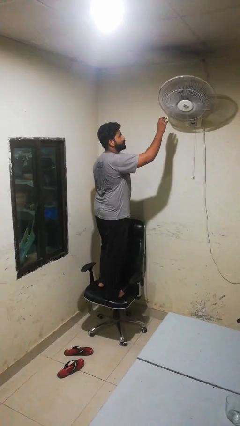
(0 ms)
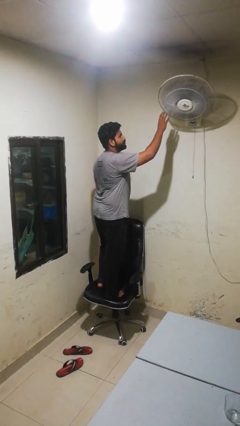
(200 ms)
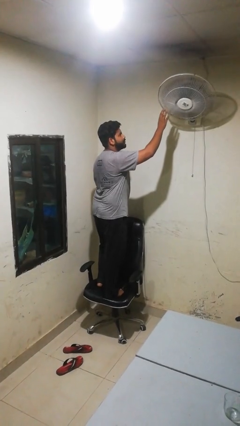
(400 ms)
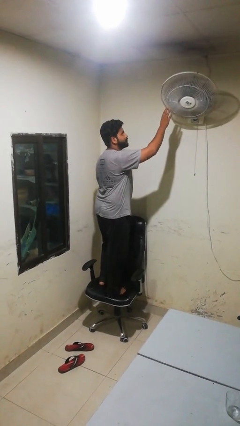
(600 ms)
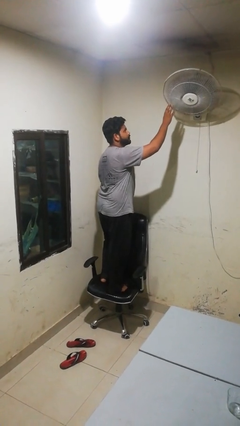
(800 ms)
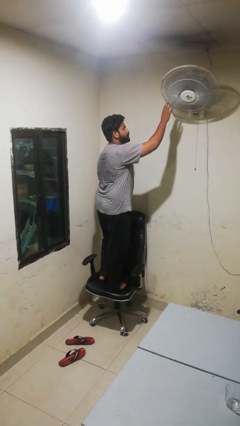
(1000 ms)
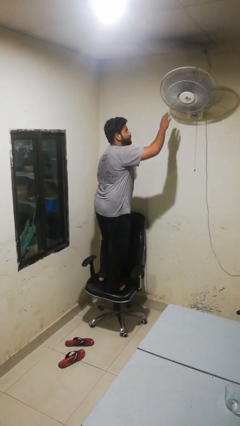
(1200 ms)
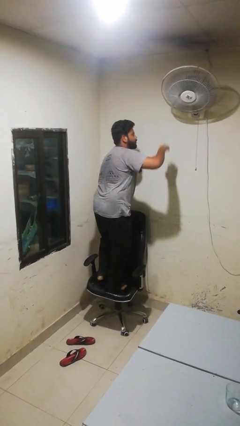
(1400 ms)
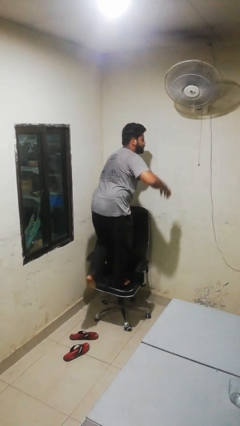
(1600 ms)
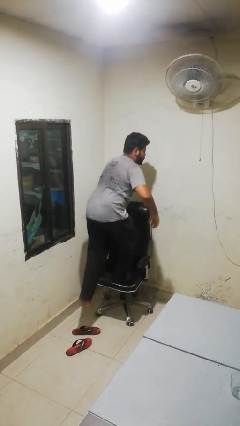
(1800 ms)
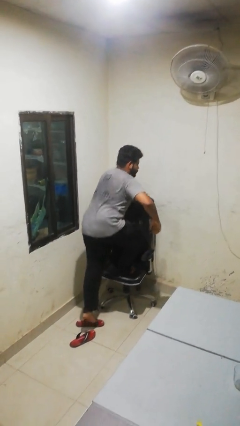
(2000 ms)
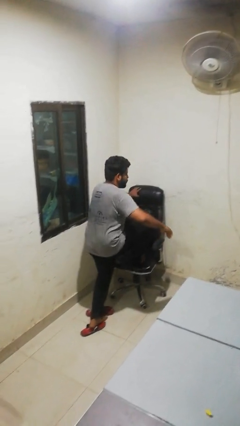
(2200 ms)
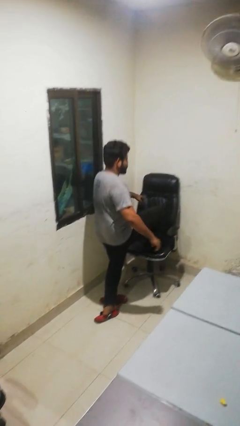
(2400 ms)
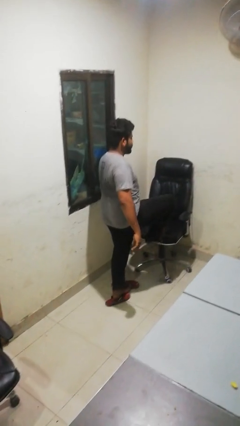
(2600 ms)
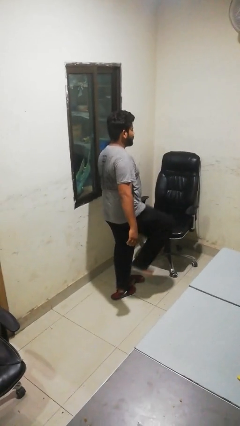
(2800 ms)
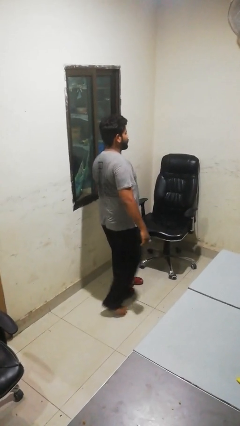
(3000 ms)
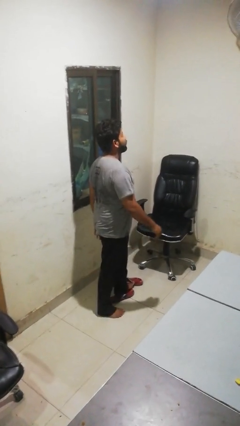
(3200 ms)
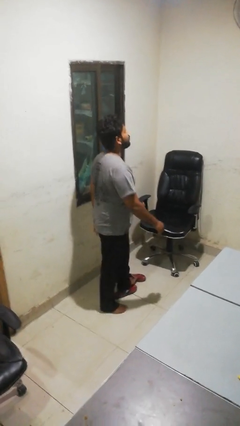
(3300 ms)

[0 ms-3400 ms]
person climbs off chair

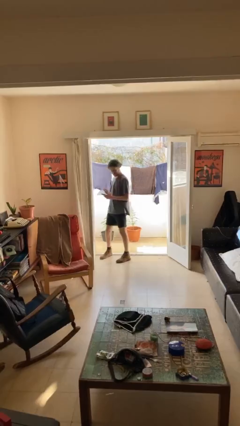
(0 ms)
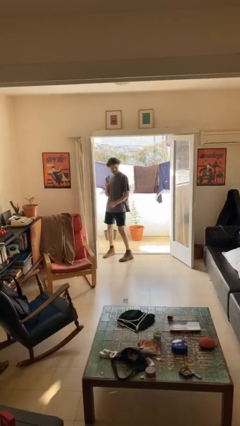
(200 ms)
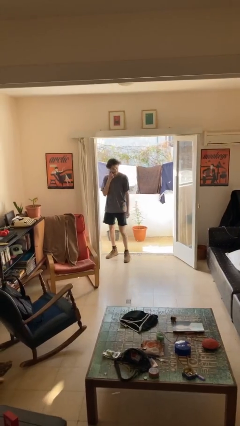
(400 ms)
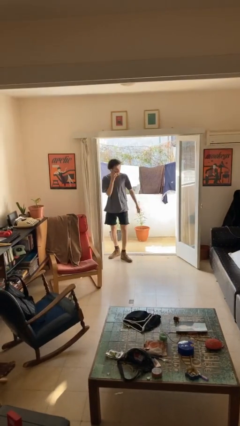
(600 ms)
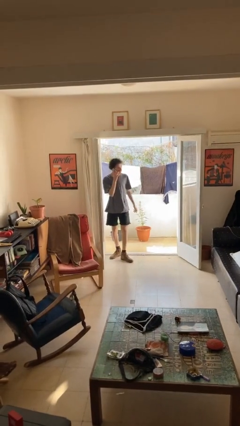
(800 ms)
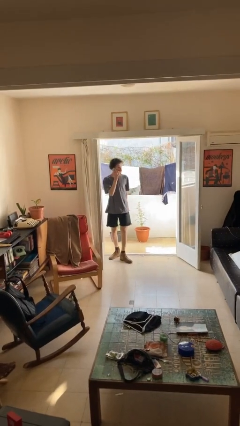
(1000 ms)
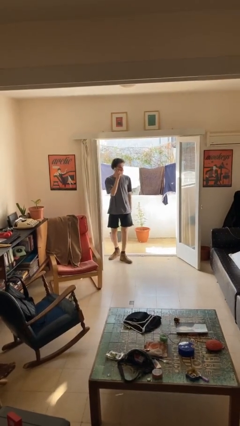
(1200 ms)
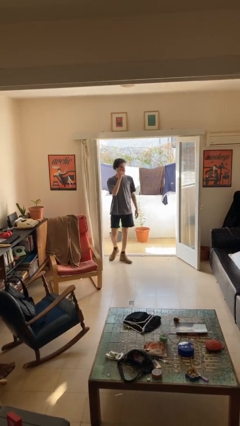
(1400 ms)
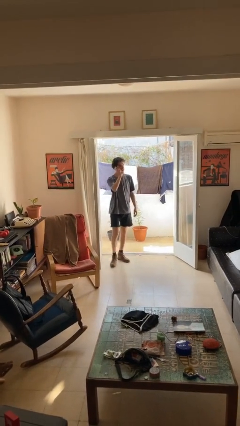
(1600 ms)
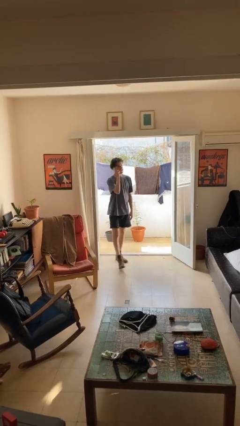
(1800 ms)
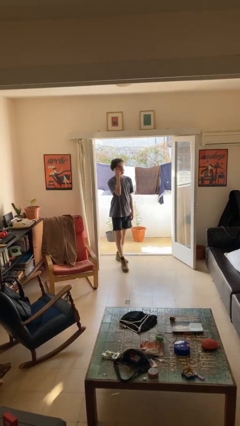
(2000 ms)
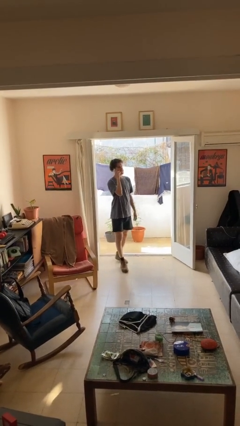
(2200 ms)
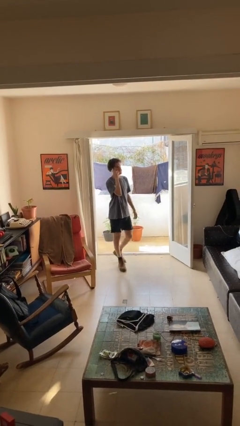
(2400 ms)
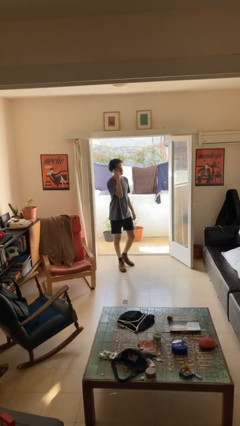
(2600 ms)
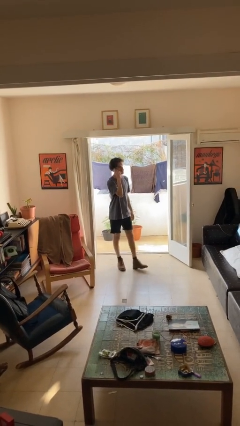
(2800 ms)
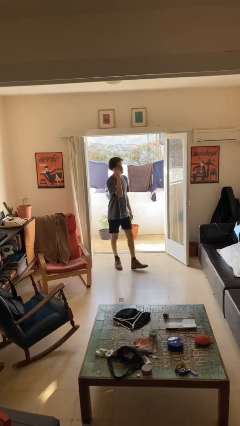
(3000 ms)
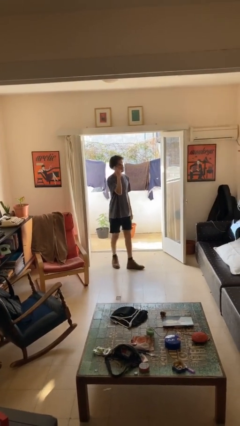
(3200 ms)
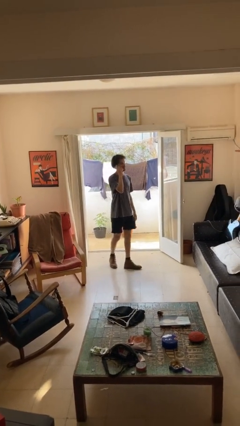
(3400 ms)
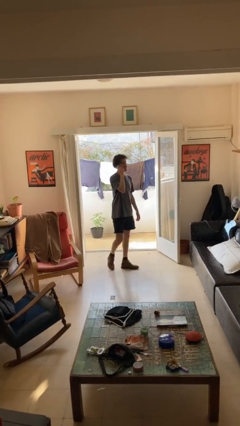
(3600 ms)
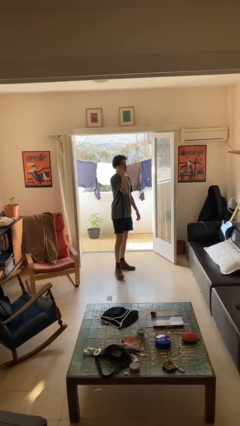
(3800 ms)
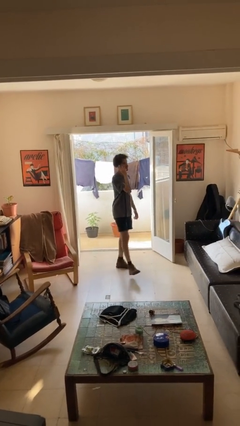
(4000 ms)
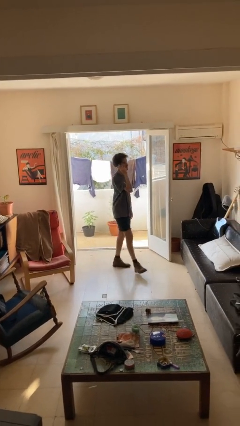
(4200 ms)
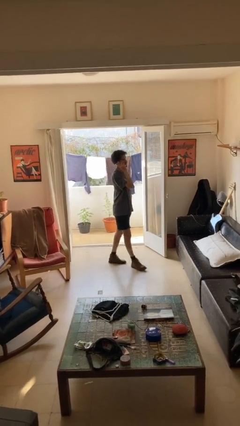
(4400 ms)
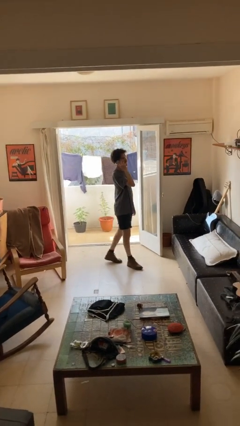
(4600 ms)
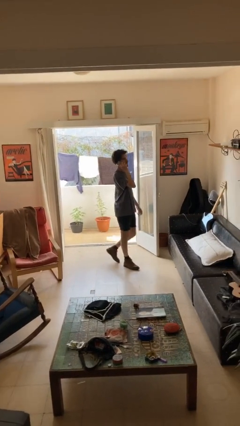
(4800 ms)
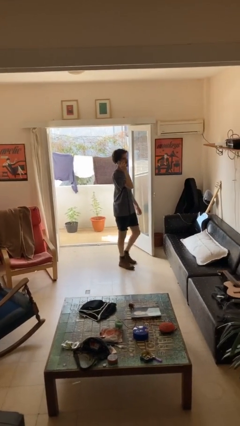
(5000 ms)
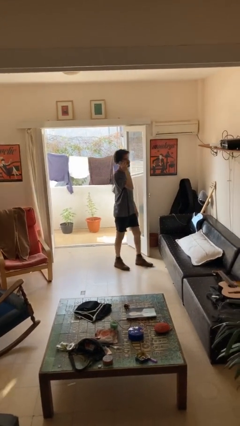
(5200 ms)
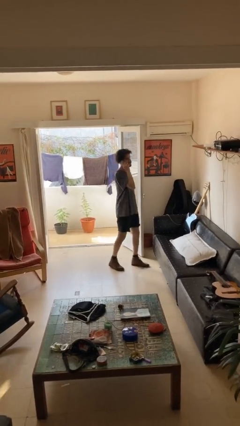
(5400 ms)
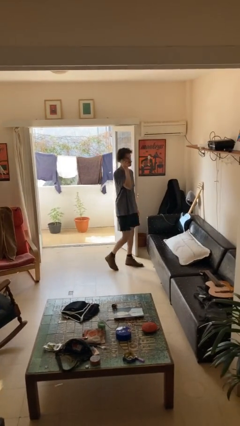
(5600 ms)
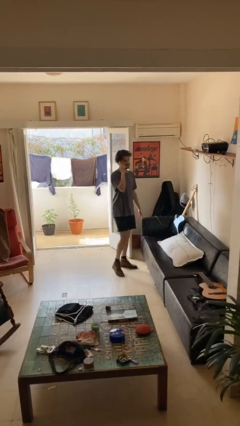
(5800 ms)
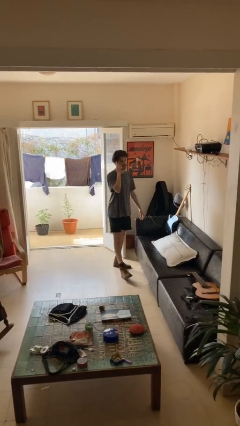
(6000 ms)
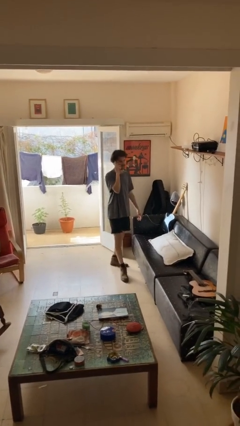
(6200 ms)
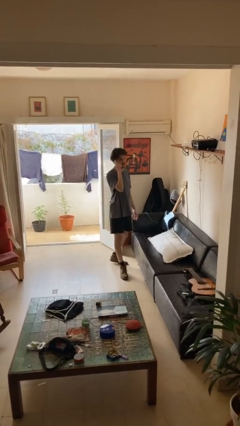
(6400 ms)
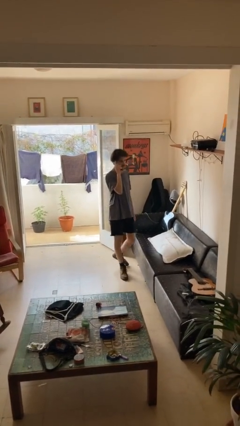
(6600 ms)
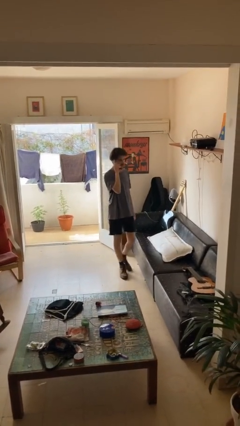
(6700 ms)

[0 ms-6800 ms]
person talks on phone

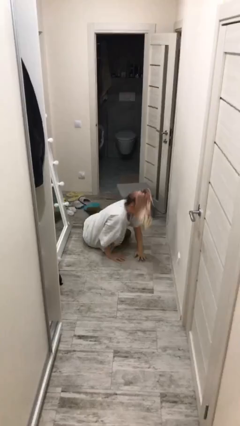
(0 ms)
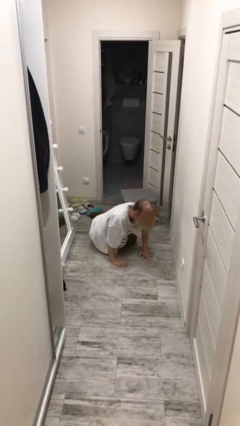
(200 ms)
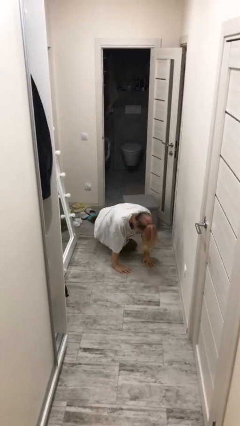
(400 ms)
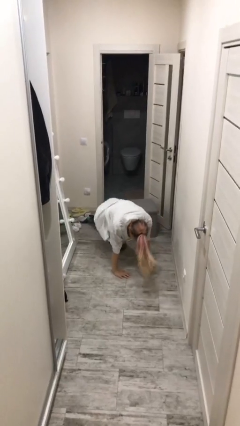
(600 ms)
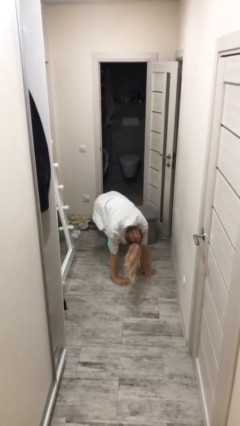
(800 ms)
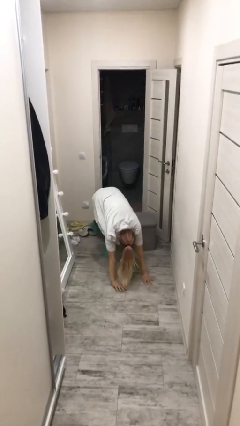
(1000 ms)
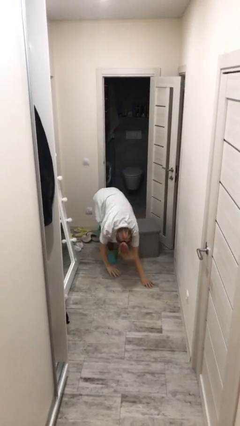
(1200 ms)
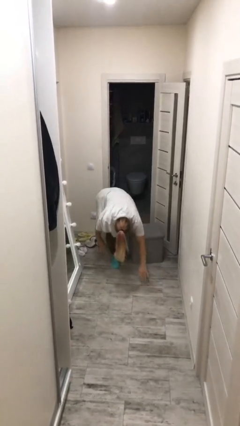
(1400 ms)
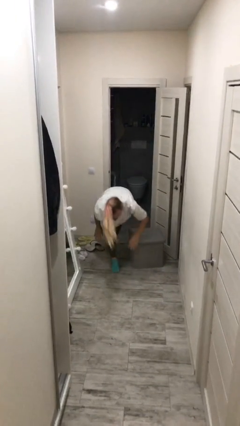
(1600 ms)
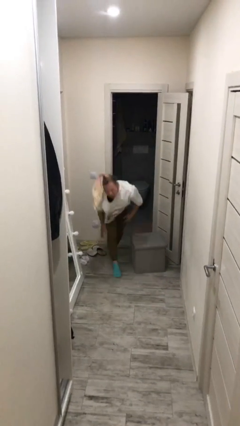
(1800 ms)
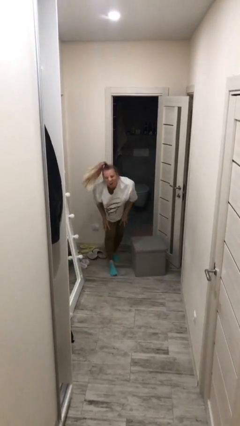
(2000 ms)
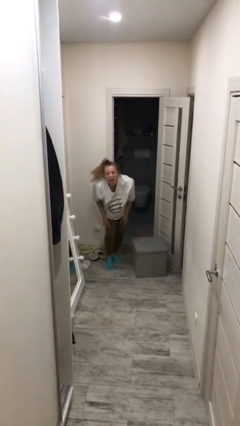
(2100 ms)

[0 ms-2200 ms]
person stands up from floor

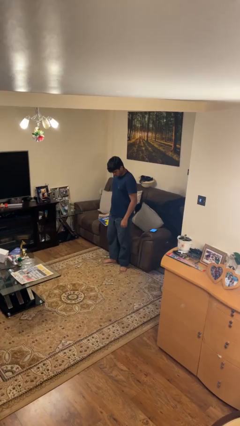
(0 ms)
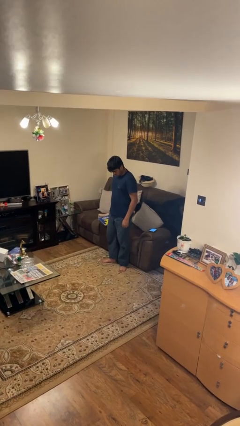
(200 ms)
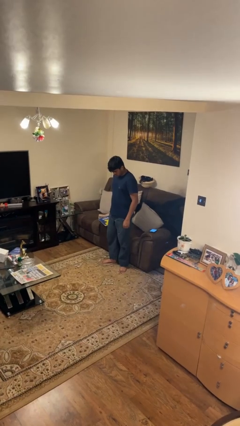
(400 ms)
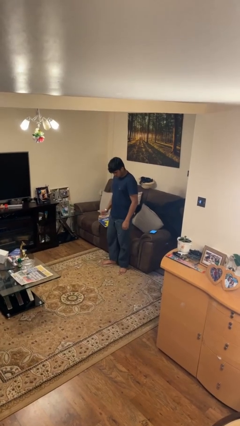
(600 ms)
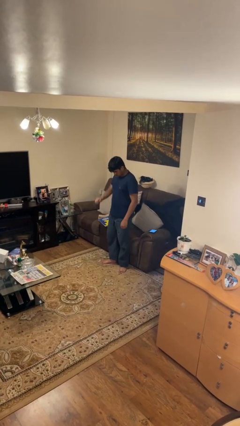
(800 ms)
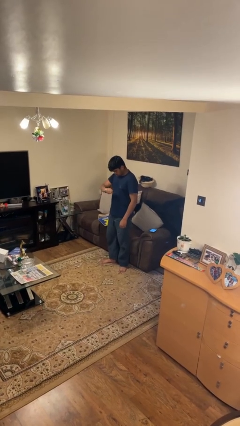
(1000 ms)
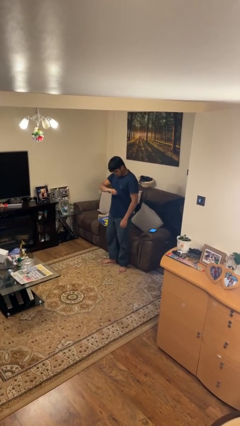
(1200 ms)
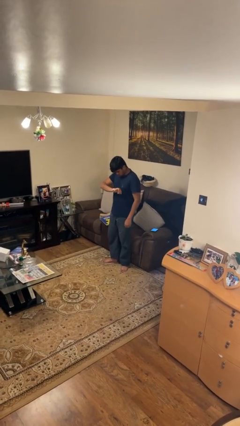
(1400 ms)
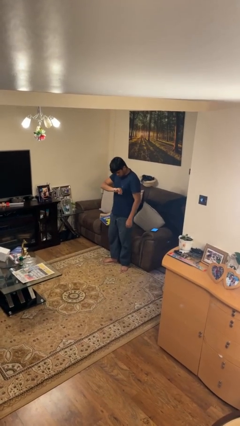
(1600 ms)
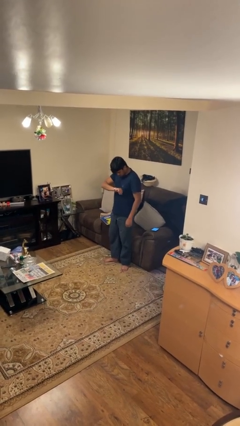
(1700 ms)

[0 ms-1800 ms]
person looks at wristwatch

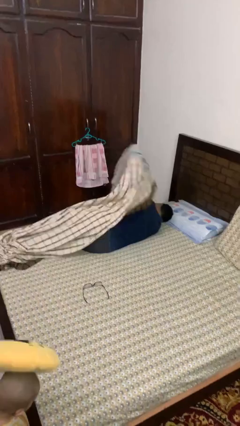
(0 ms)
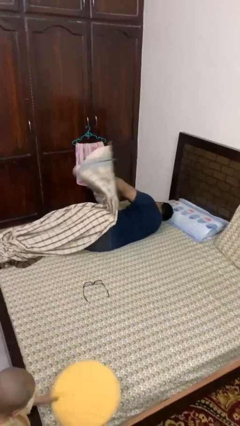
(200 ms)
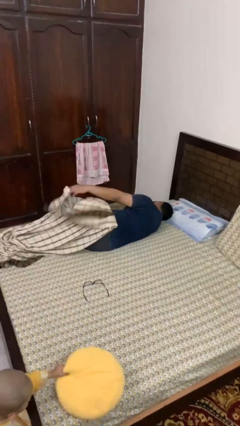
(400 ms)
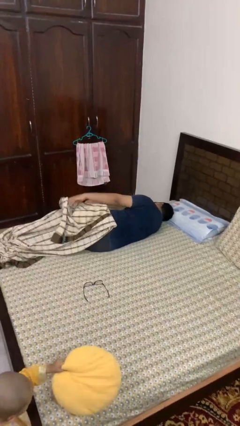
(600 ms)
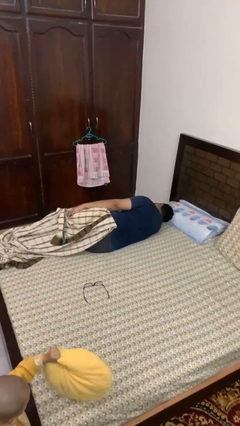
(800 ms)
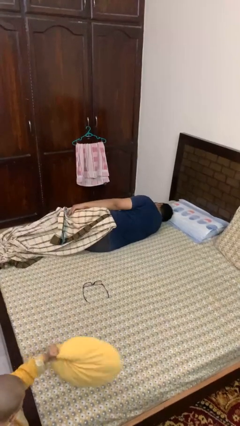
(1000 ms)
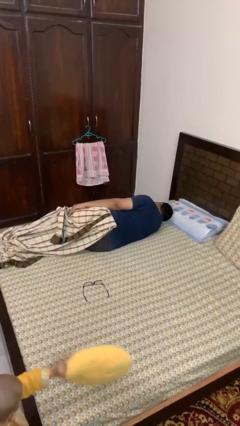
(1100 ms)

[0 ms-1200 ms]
person uncovers with blanket

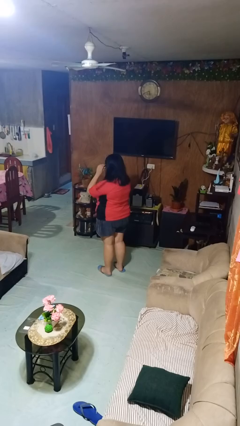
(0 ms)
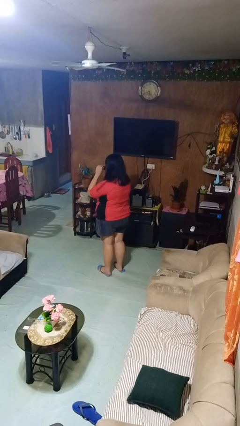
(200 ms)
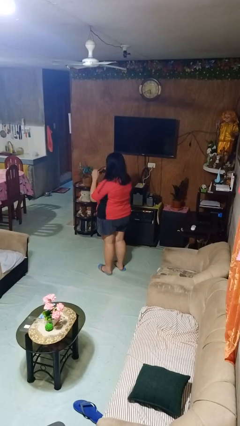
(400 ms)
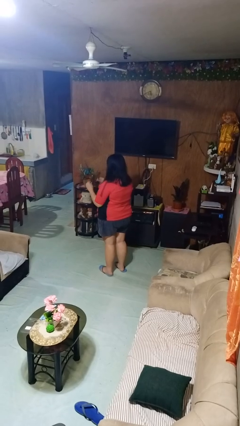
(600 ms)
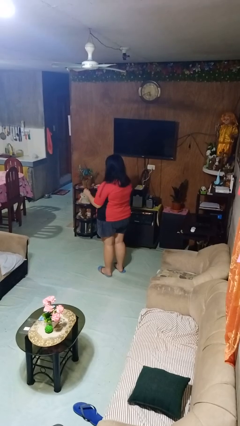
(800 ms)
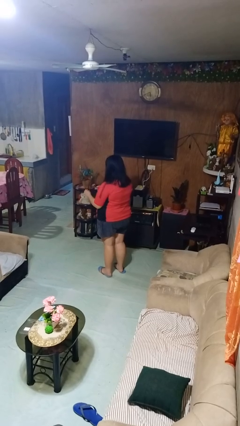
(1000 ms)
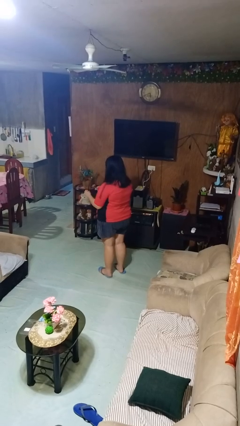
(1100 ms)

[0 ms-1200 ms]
person takes off sunglasses

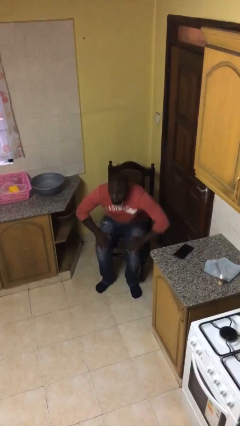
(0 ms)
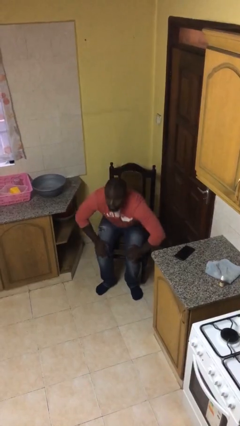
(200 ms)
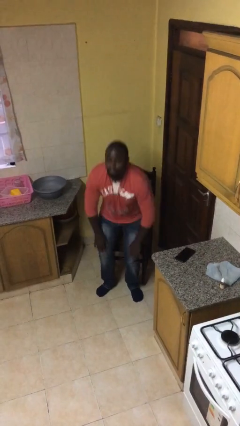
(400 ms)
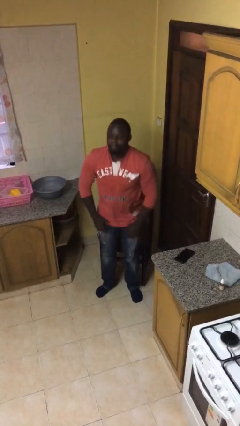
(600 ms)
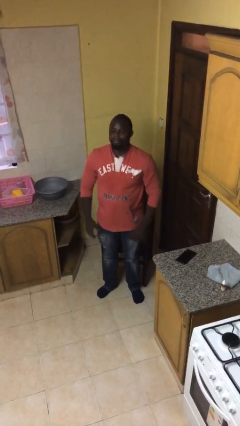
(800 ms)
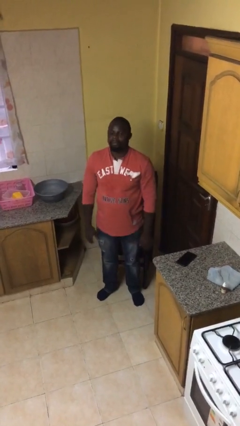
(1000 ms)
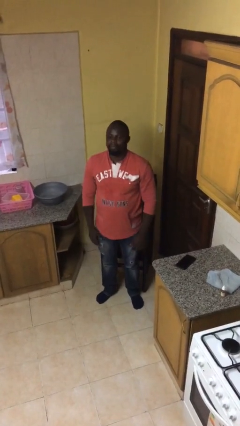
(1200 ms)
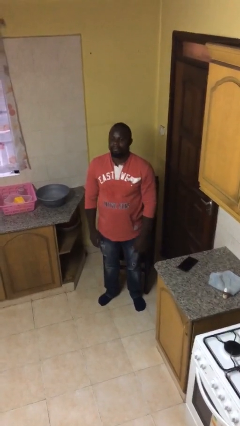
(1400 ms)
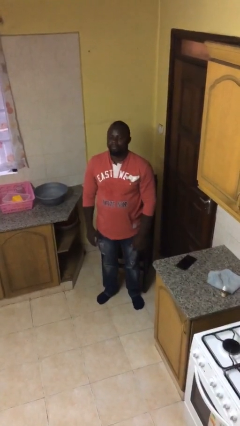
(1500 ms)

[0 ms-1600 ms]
person stands up
